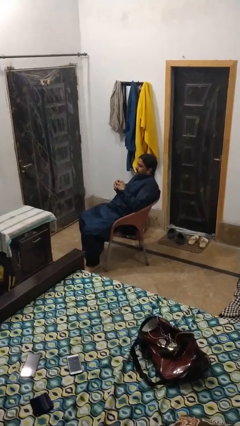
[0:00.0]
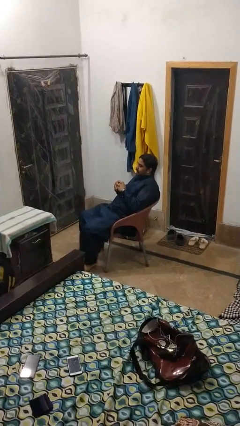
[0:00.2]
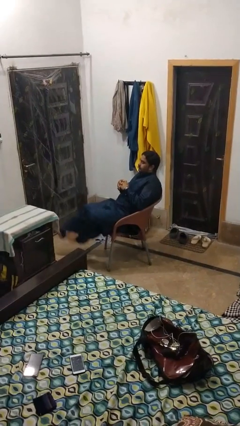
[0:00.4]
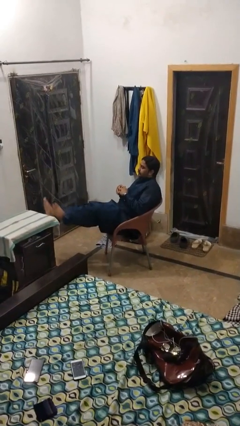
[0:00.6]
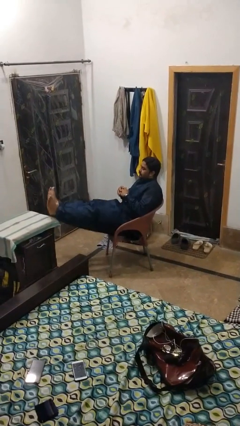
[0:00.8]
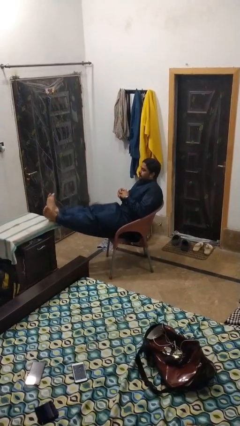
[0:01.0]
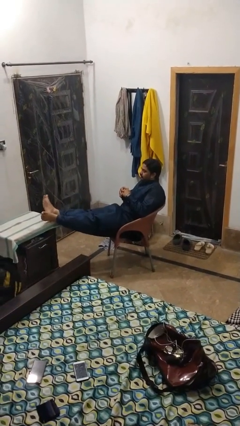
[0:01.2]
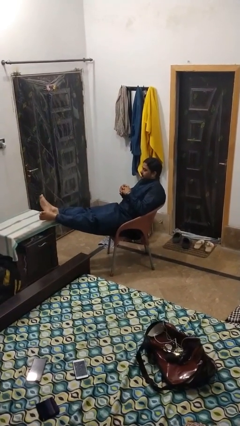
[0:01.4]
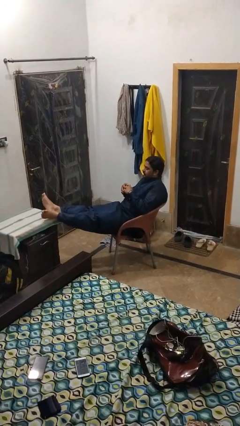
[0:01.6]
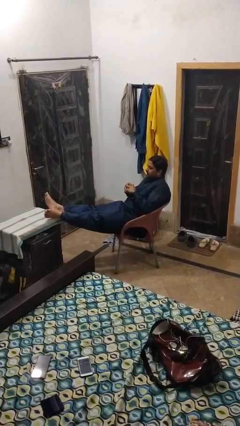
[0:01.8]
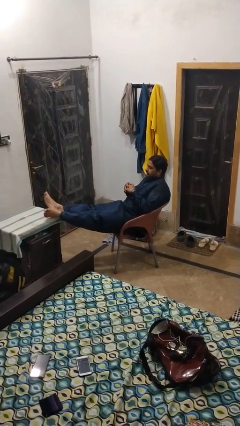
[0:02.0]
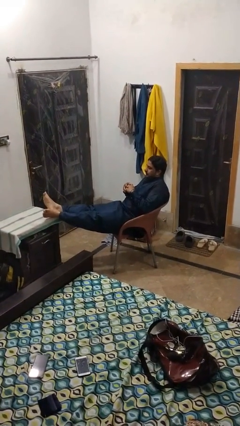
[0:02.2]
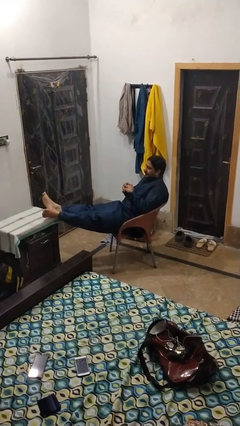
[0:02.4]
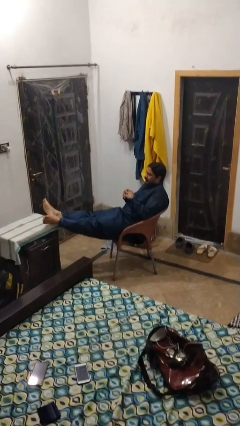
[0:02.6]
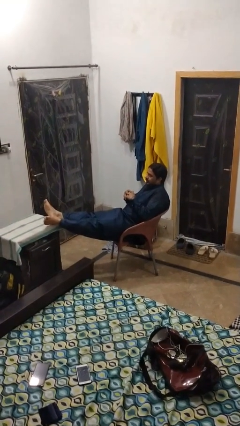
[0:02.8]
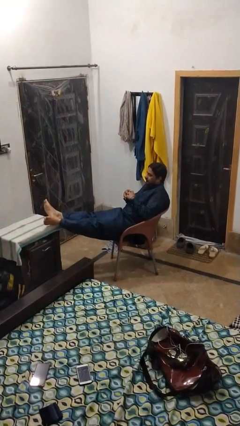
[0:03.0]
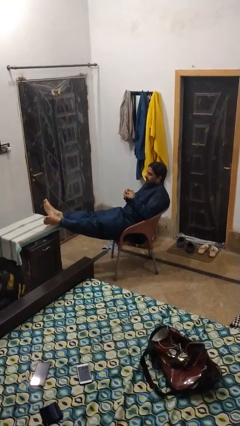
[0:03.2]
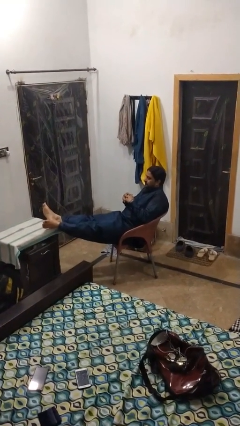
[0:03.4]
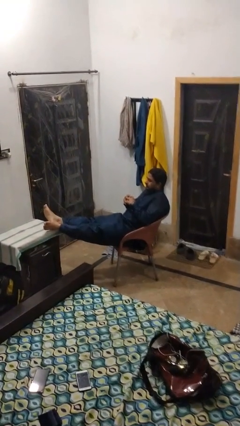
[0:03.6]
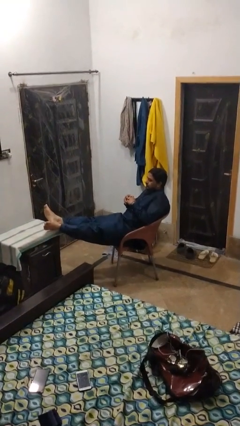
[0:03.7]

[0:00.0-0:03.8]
person puts feet up

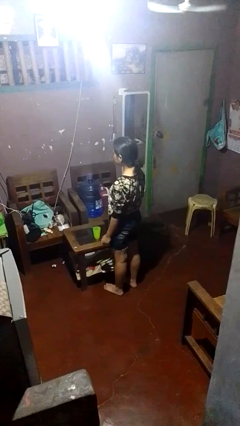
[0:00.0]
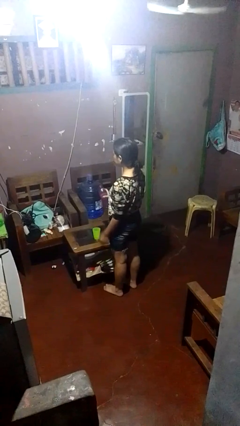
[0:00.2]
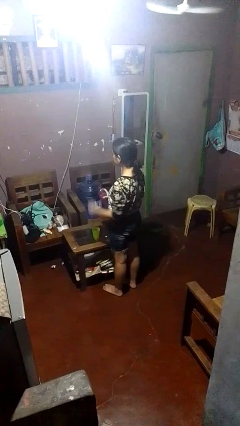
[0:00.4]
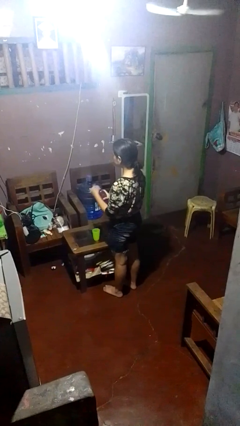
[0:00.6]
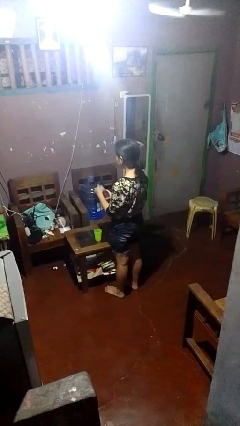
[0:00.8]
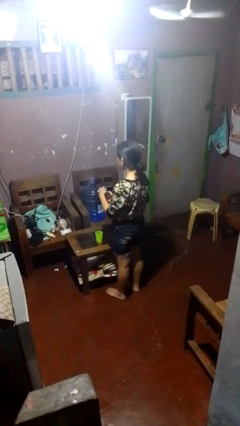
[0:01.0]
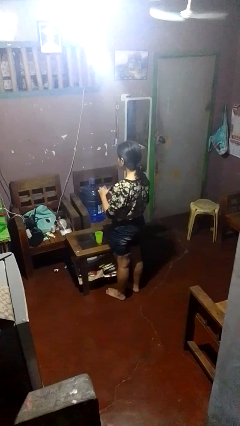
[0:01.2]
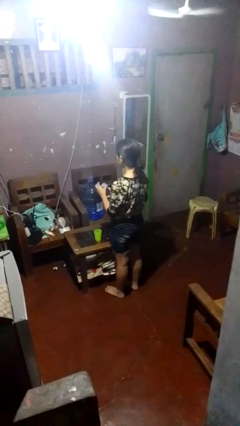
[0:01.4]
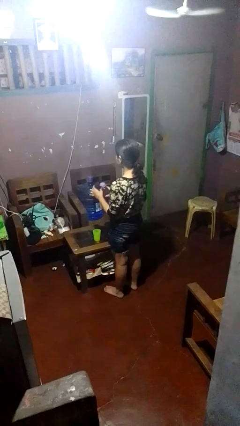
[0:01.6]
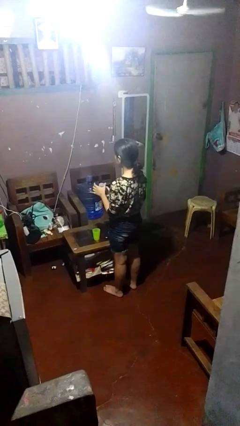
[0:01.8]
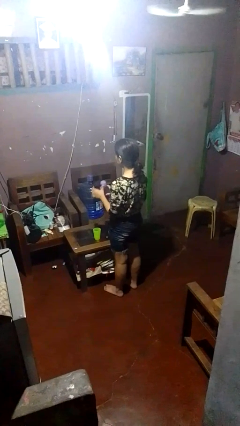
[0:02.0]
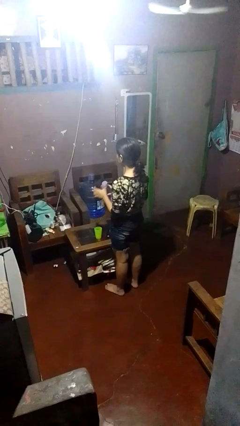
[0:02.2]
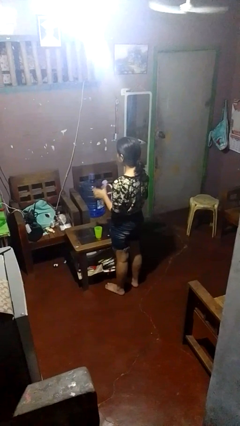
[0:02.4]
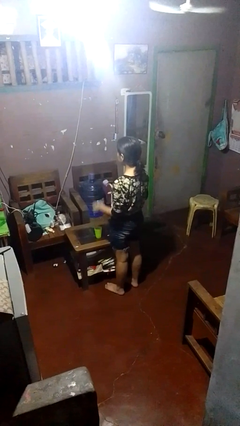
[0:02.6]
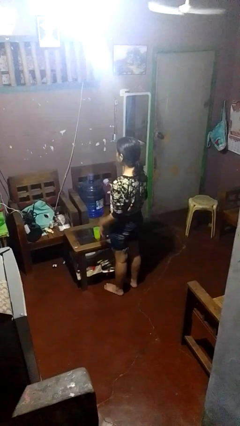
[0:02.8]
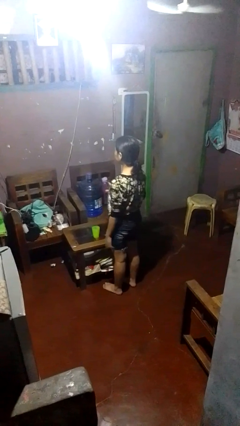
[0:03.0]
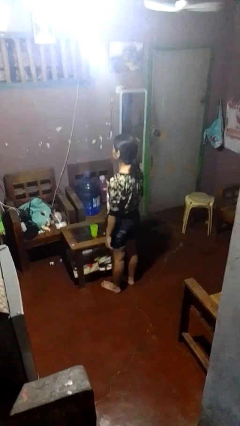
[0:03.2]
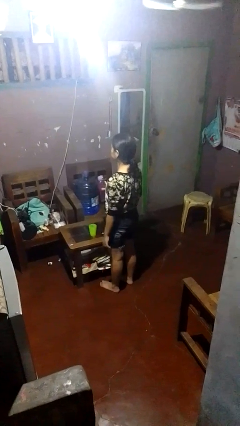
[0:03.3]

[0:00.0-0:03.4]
person screws lid to bottle

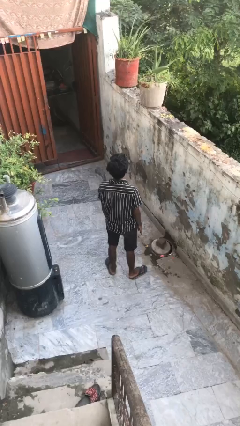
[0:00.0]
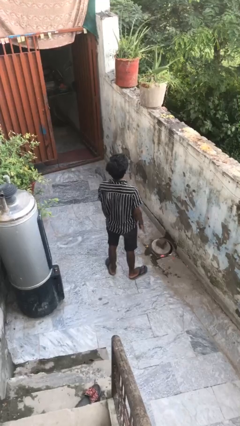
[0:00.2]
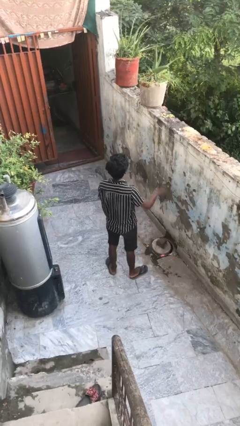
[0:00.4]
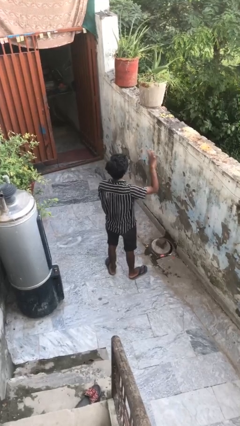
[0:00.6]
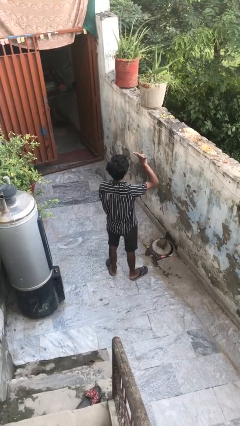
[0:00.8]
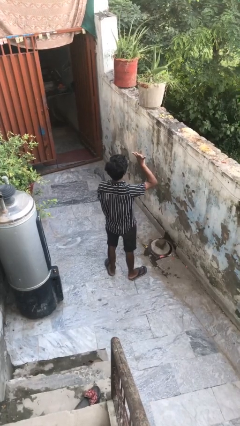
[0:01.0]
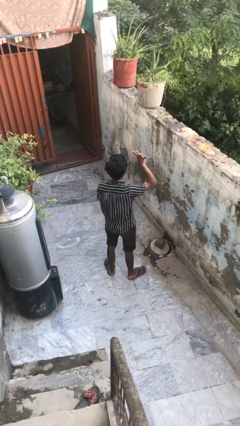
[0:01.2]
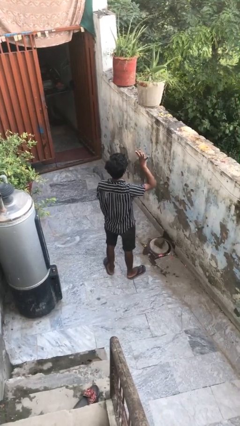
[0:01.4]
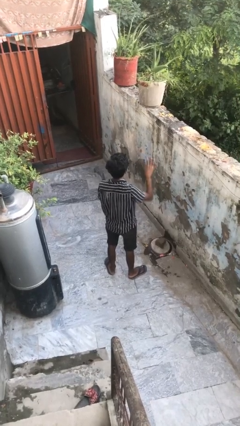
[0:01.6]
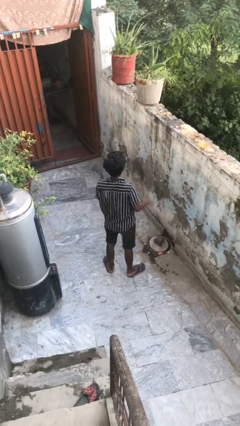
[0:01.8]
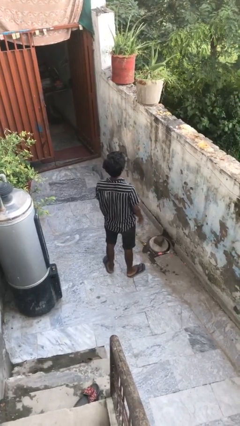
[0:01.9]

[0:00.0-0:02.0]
person gestures number four

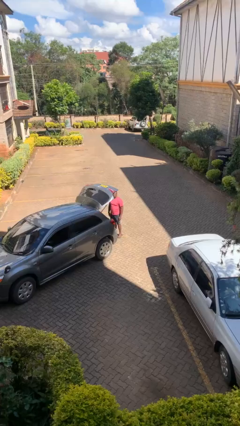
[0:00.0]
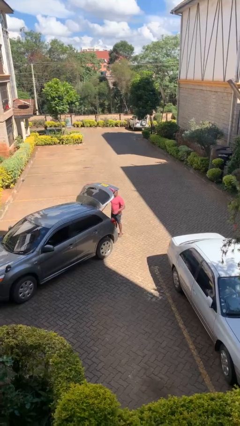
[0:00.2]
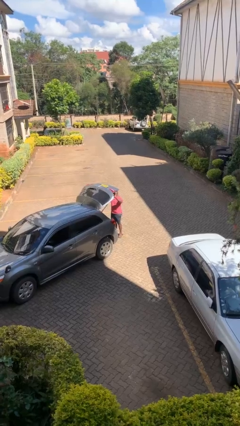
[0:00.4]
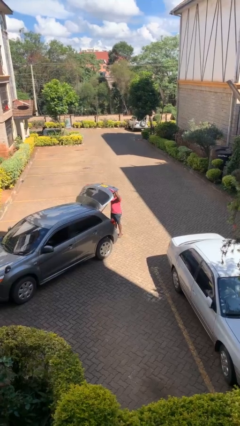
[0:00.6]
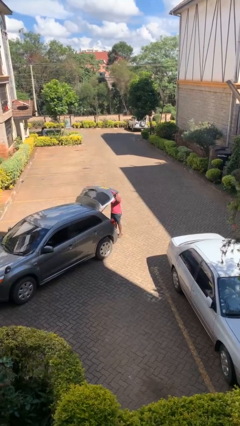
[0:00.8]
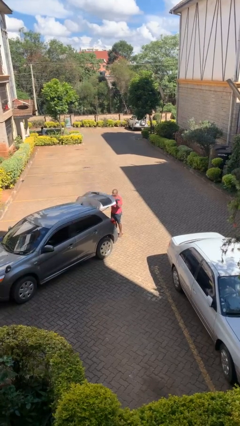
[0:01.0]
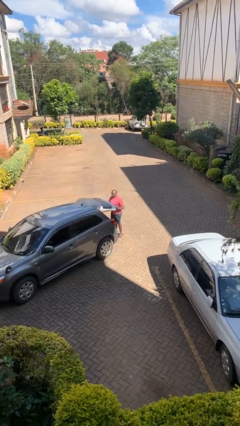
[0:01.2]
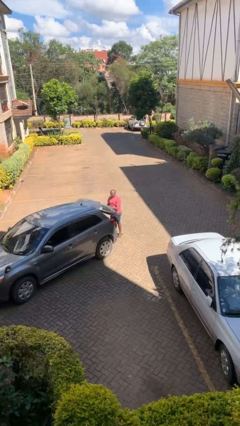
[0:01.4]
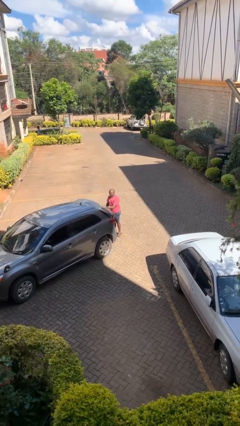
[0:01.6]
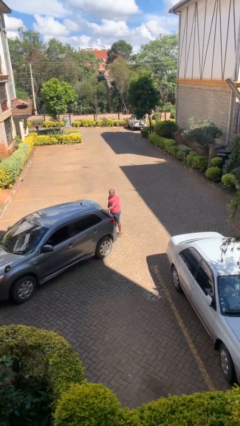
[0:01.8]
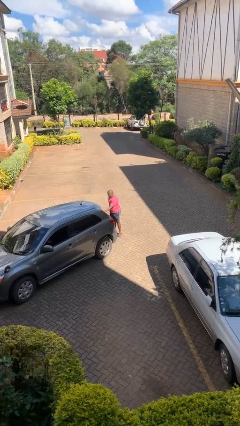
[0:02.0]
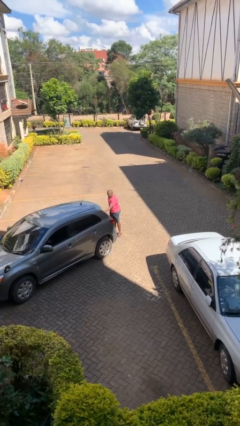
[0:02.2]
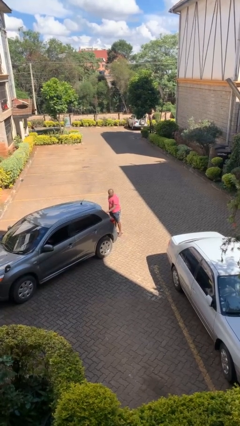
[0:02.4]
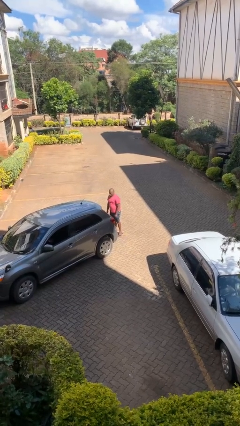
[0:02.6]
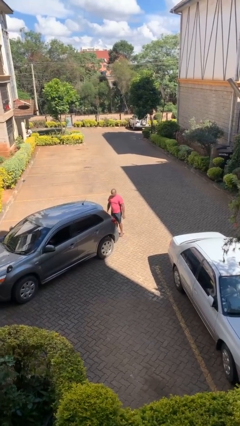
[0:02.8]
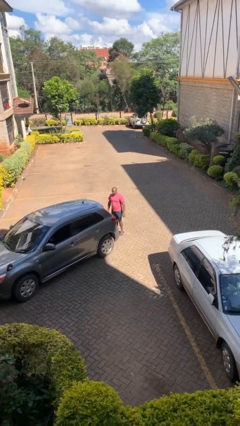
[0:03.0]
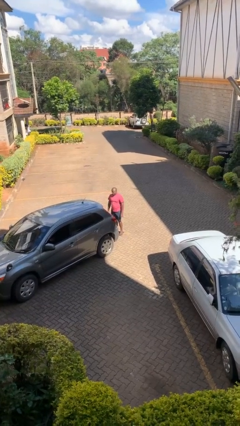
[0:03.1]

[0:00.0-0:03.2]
person closes car trunk

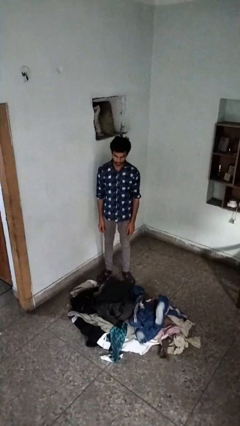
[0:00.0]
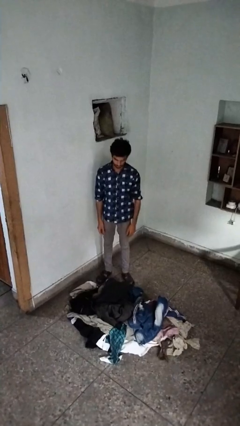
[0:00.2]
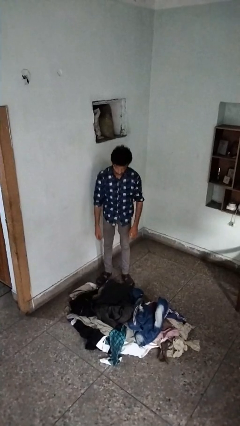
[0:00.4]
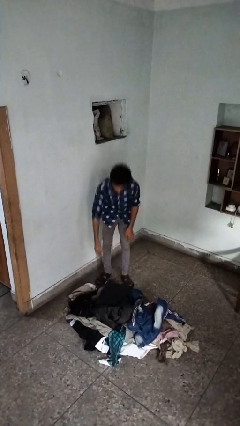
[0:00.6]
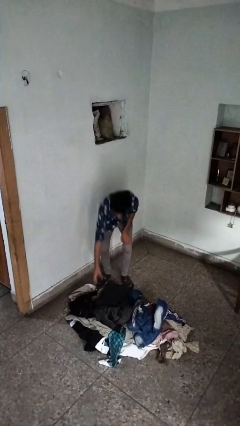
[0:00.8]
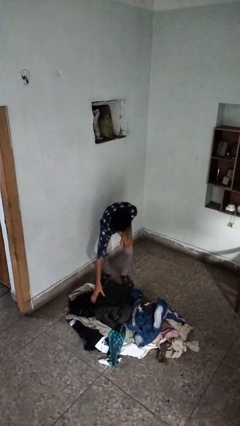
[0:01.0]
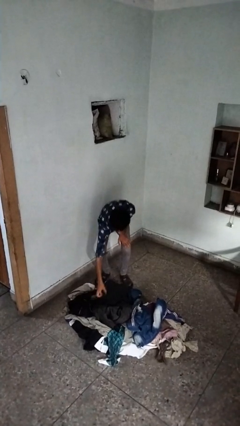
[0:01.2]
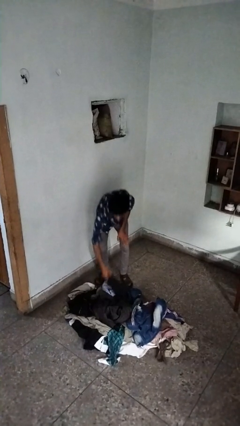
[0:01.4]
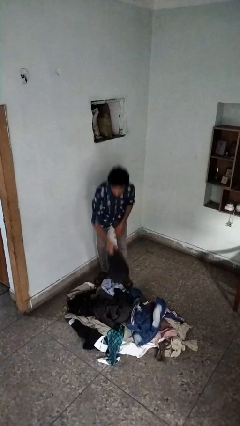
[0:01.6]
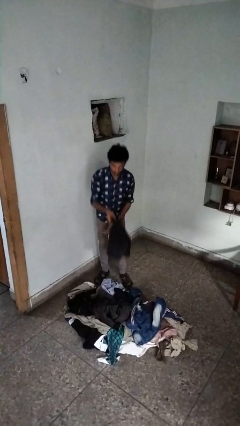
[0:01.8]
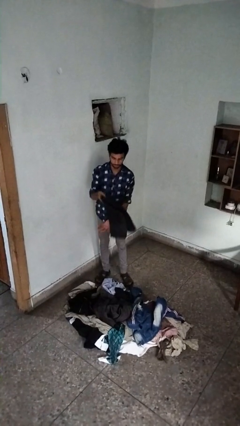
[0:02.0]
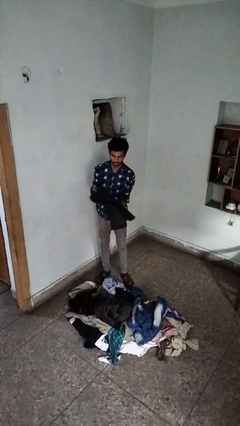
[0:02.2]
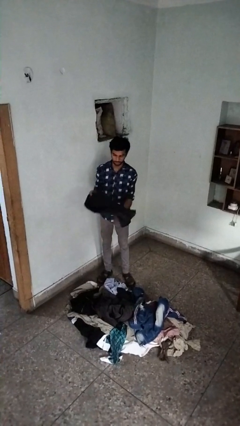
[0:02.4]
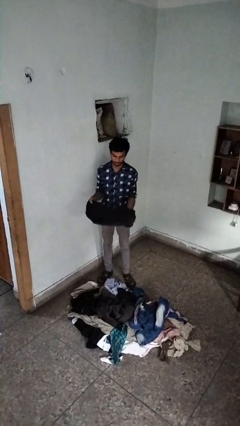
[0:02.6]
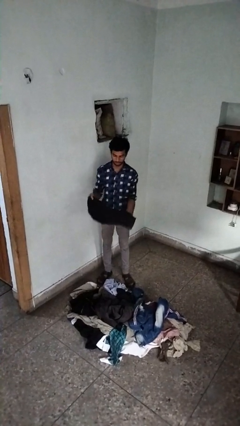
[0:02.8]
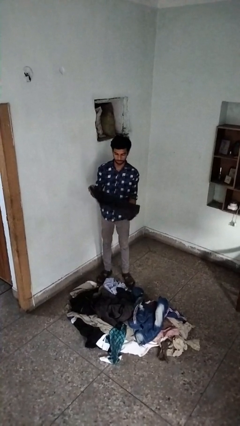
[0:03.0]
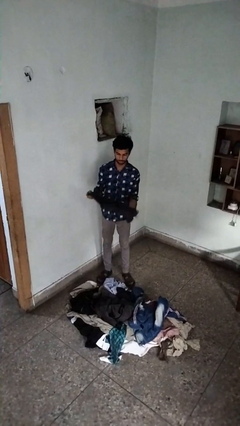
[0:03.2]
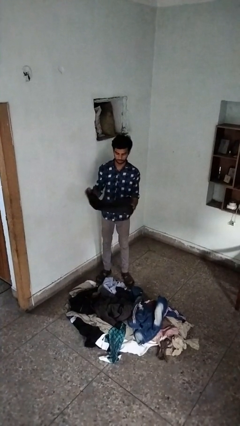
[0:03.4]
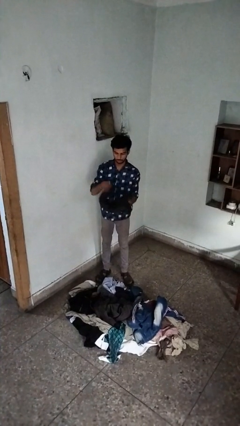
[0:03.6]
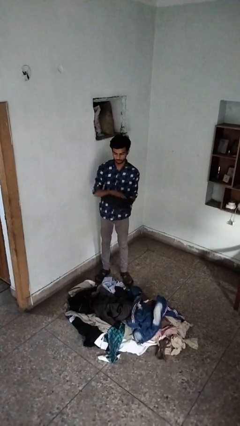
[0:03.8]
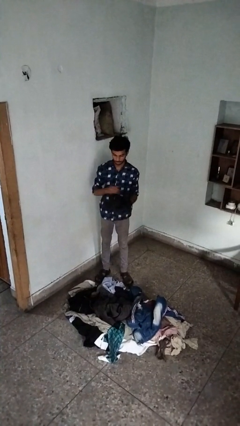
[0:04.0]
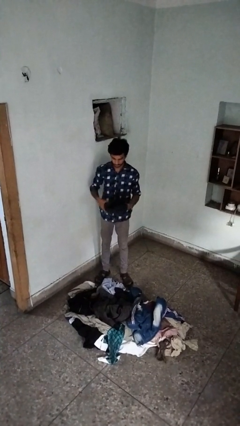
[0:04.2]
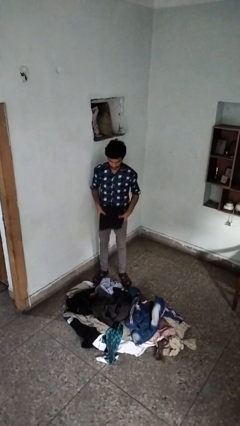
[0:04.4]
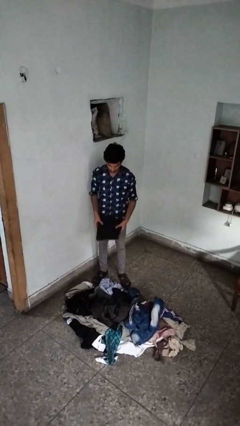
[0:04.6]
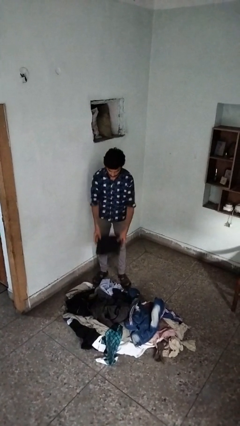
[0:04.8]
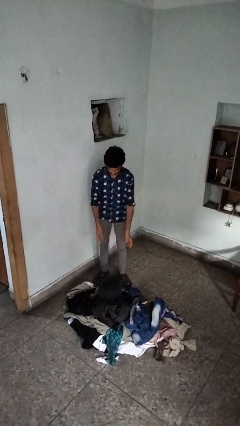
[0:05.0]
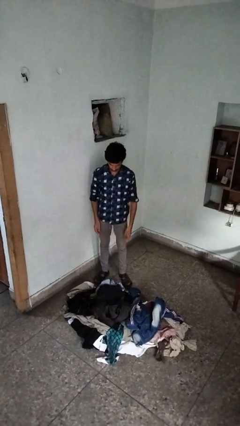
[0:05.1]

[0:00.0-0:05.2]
person folds pants

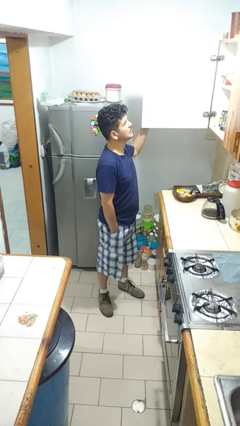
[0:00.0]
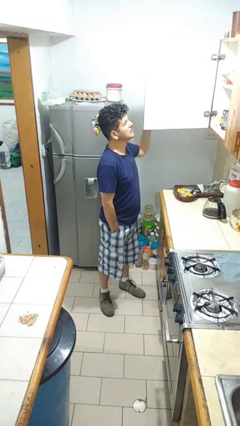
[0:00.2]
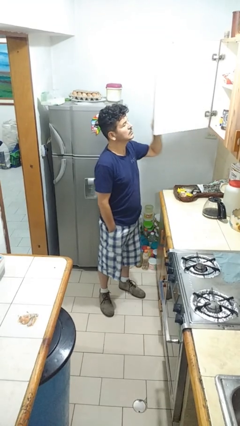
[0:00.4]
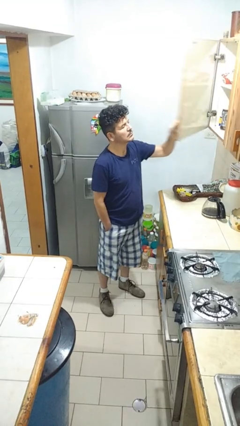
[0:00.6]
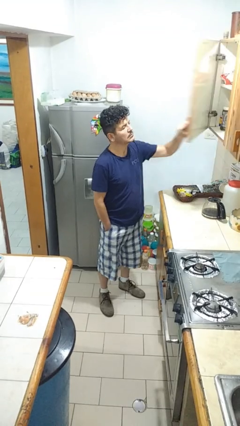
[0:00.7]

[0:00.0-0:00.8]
person closes cabinet
